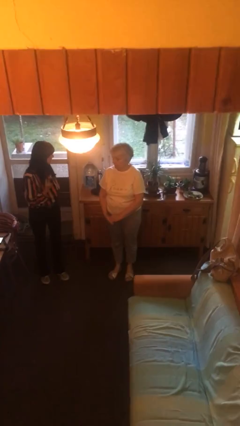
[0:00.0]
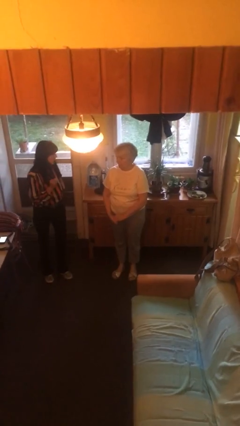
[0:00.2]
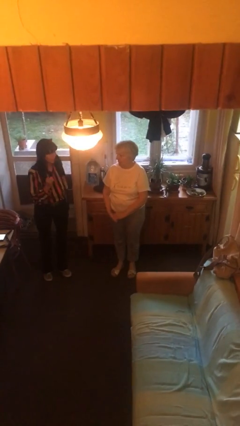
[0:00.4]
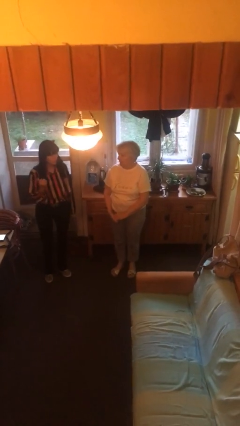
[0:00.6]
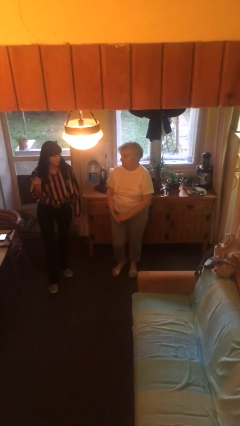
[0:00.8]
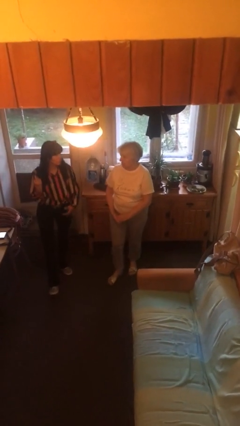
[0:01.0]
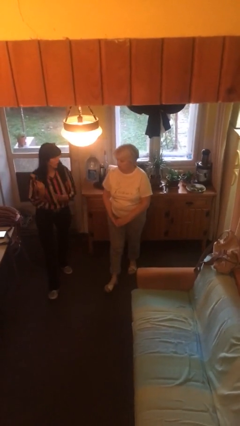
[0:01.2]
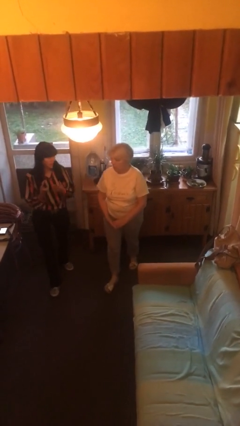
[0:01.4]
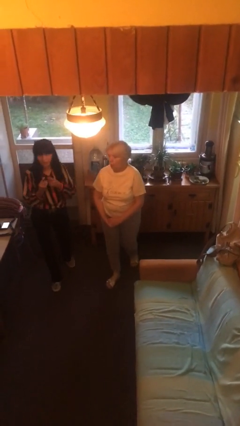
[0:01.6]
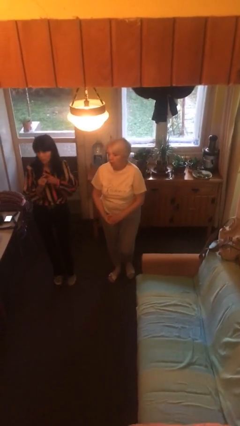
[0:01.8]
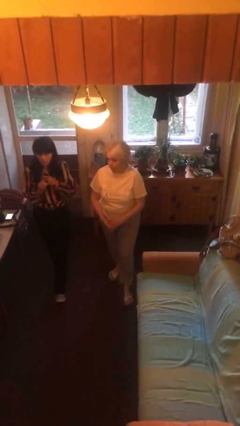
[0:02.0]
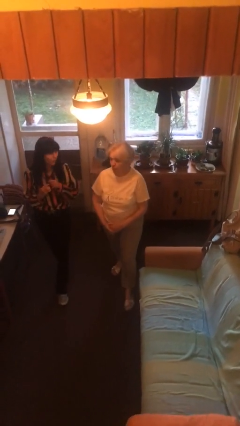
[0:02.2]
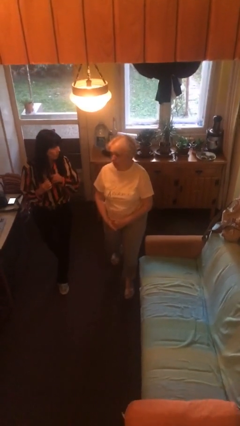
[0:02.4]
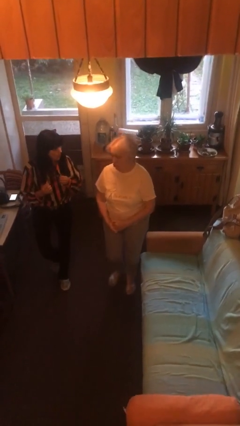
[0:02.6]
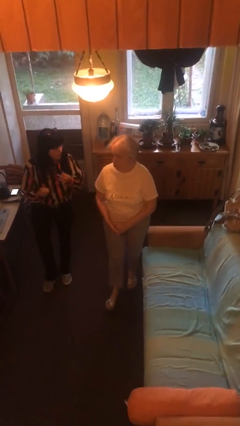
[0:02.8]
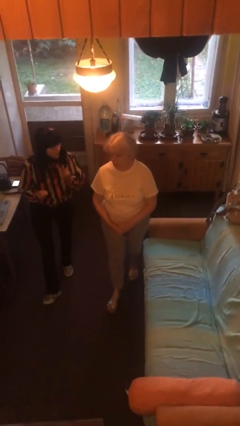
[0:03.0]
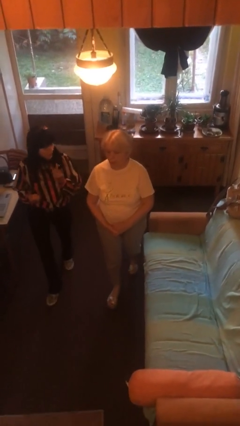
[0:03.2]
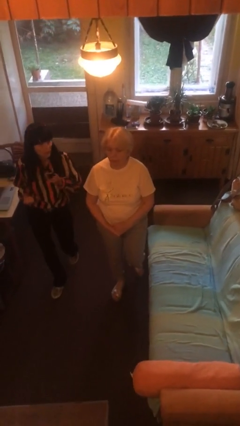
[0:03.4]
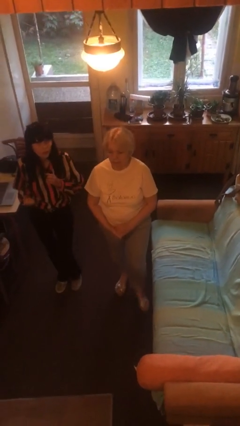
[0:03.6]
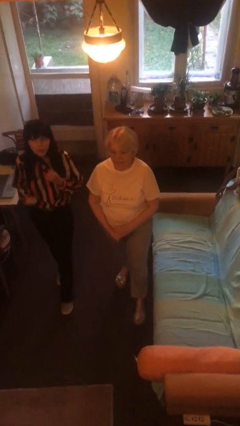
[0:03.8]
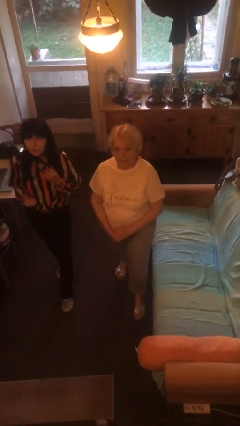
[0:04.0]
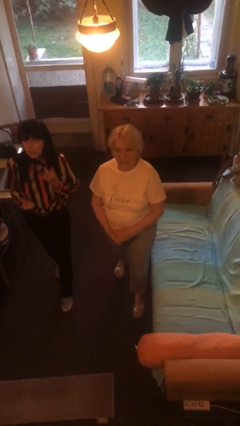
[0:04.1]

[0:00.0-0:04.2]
person talks to person

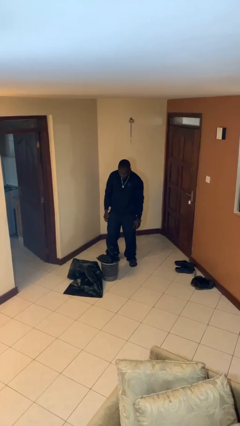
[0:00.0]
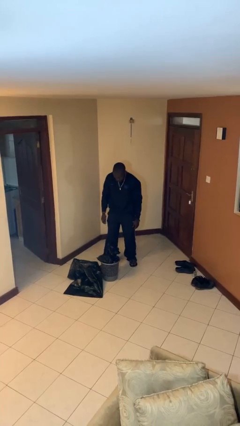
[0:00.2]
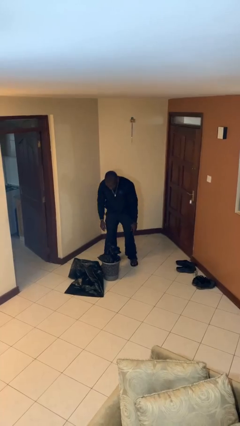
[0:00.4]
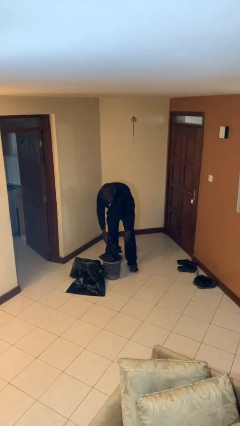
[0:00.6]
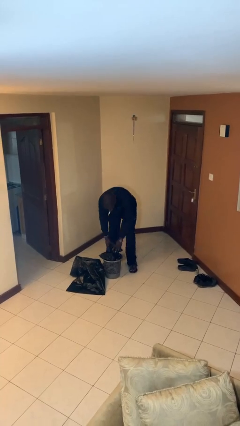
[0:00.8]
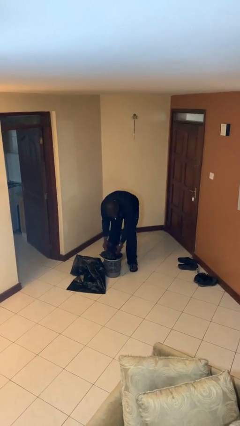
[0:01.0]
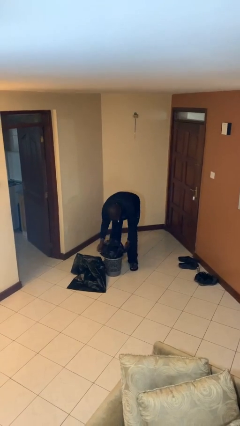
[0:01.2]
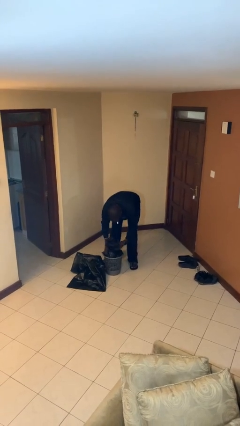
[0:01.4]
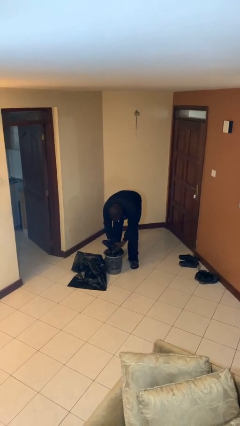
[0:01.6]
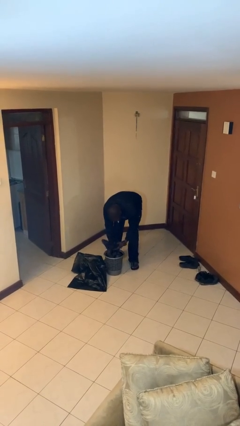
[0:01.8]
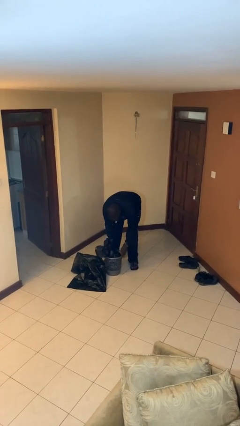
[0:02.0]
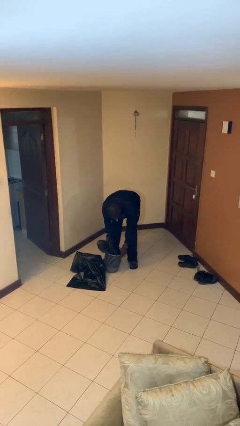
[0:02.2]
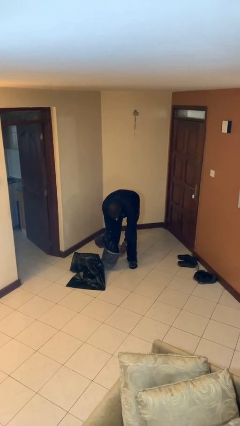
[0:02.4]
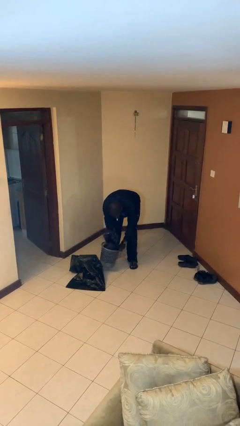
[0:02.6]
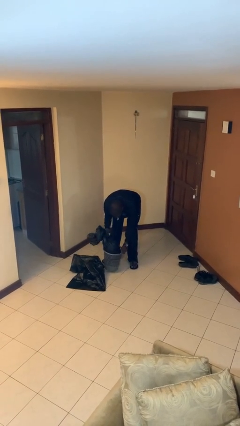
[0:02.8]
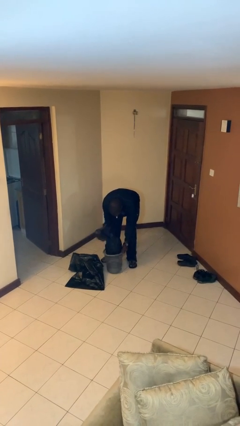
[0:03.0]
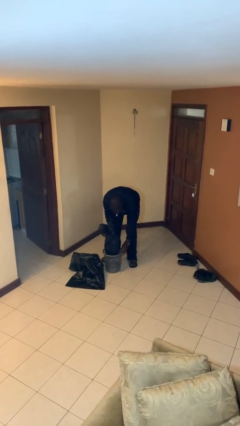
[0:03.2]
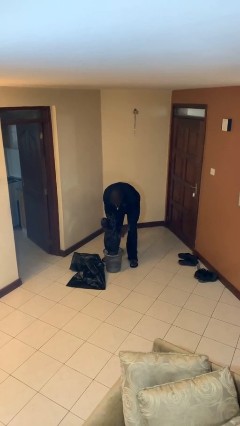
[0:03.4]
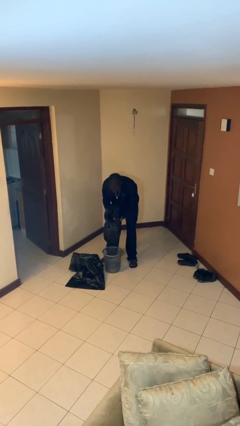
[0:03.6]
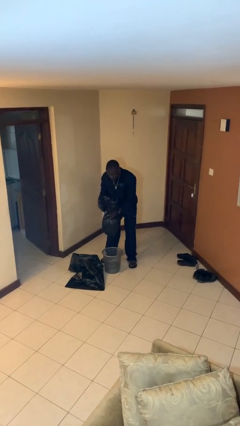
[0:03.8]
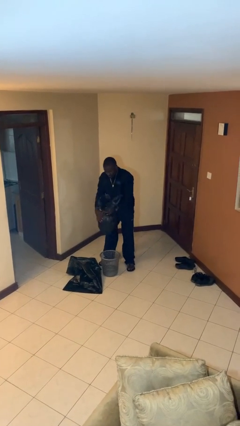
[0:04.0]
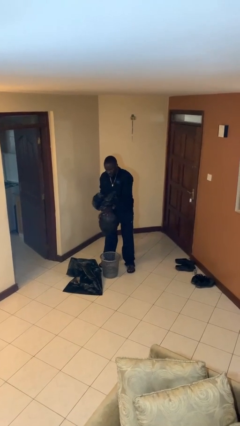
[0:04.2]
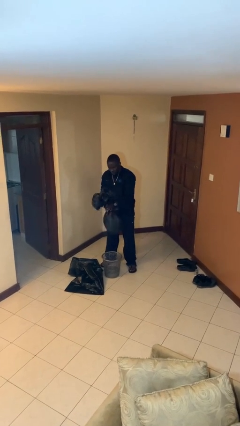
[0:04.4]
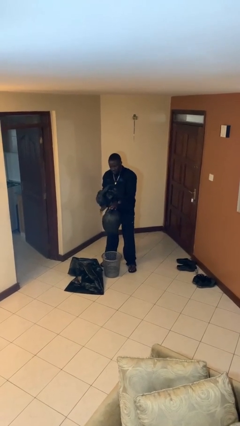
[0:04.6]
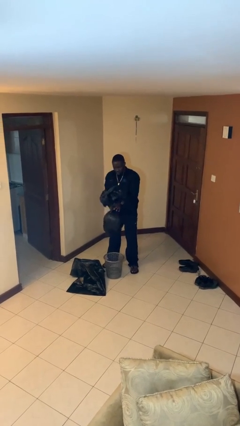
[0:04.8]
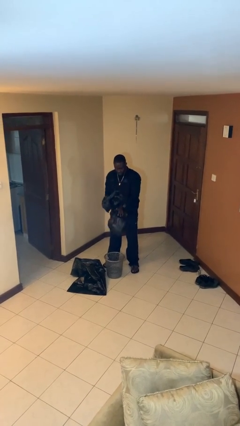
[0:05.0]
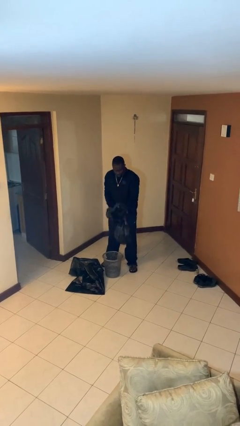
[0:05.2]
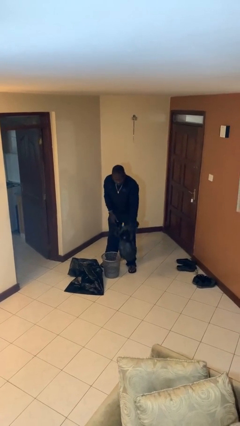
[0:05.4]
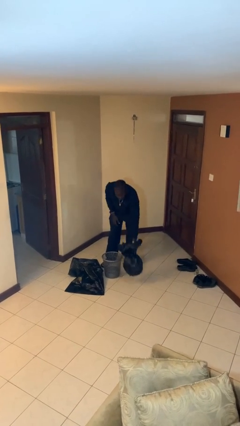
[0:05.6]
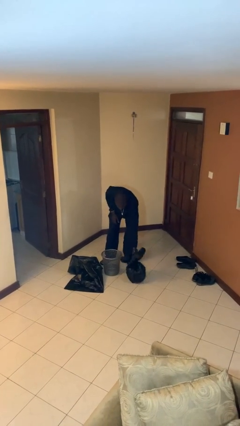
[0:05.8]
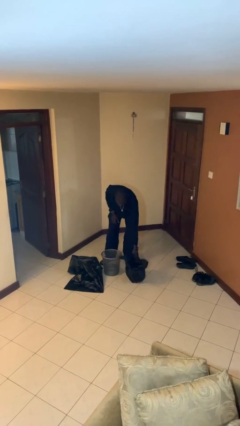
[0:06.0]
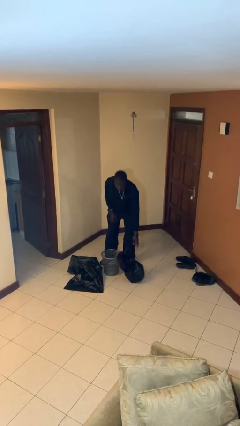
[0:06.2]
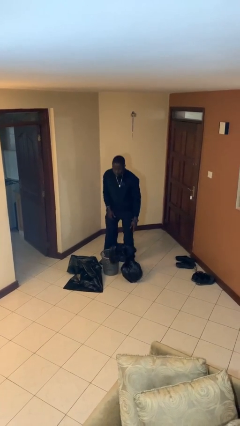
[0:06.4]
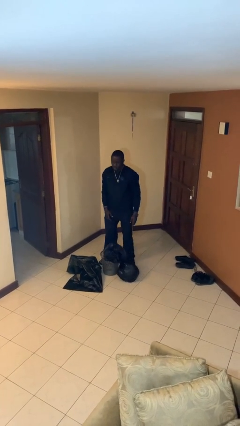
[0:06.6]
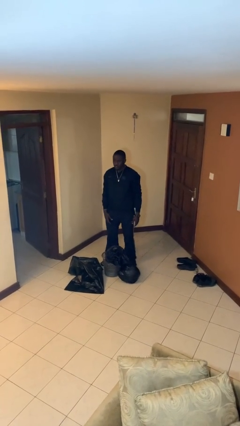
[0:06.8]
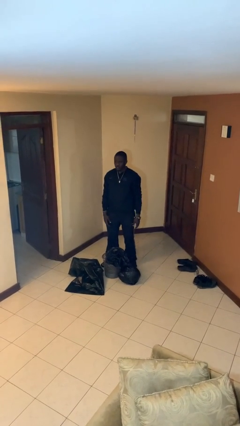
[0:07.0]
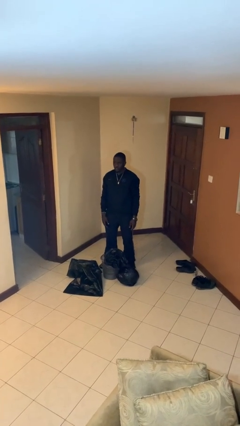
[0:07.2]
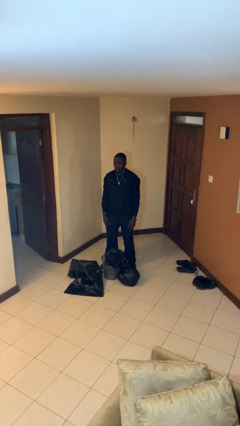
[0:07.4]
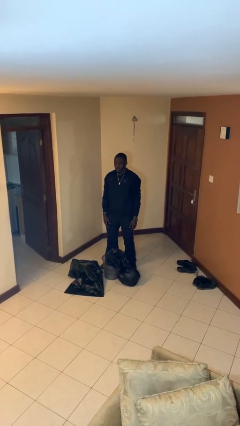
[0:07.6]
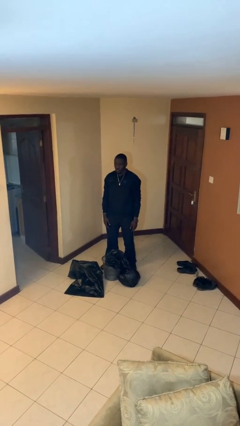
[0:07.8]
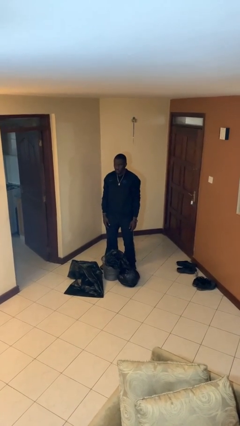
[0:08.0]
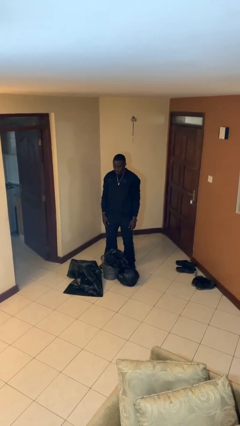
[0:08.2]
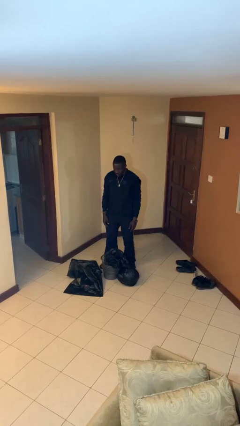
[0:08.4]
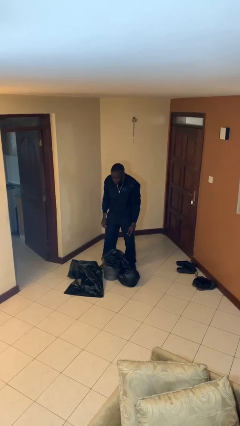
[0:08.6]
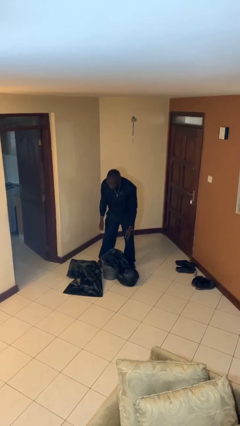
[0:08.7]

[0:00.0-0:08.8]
person removes trashbag from trashcan

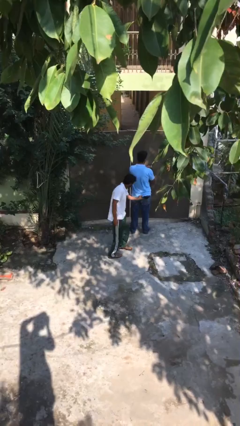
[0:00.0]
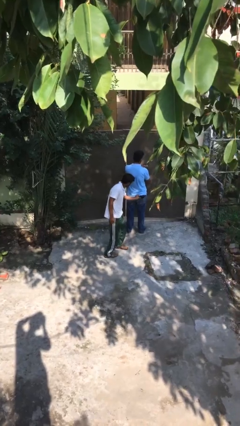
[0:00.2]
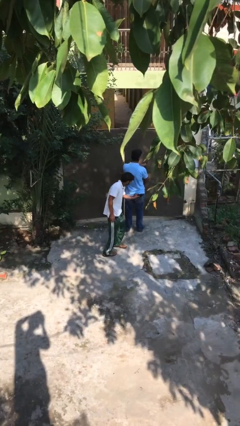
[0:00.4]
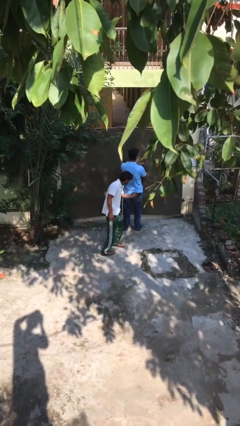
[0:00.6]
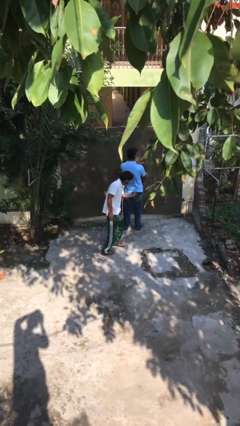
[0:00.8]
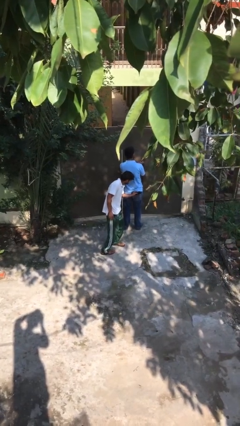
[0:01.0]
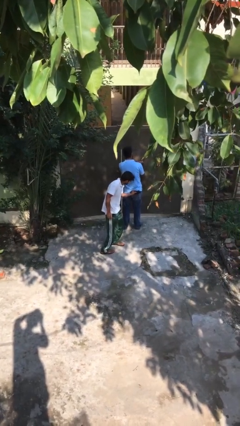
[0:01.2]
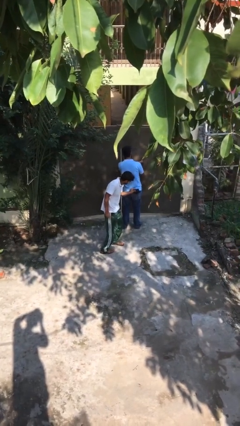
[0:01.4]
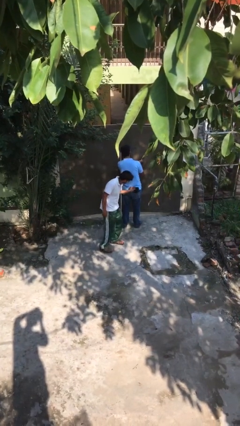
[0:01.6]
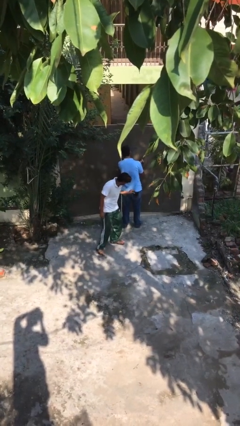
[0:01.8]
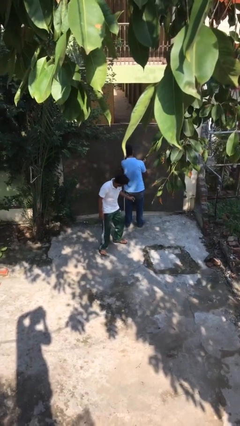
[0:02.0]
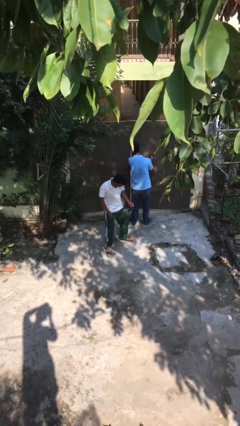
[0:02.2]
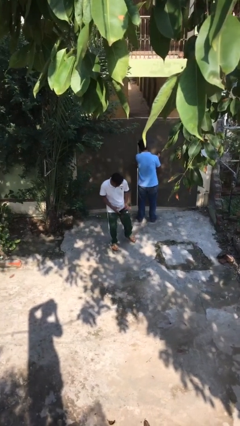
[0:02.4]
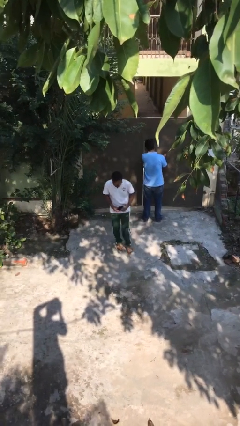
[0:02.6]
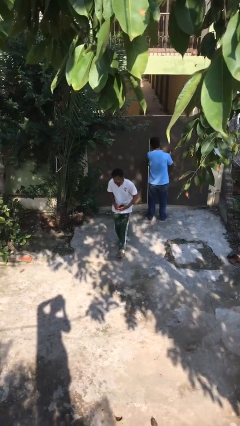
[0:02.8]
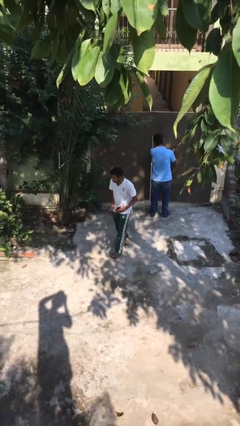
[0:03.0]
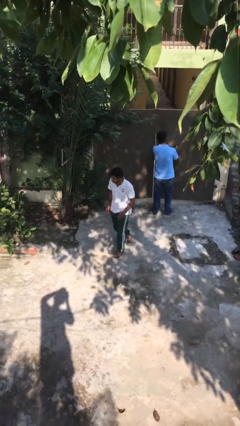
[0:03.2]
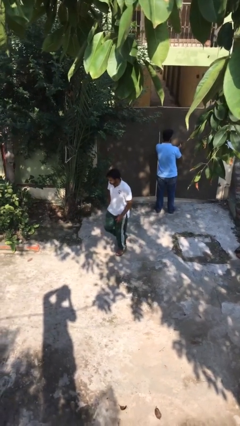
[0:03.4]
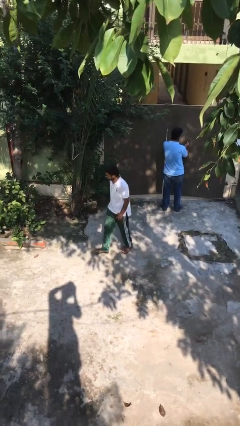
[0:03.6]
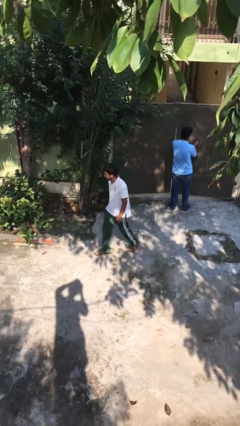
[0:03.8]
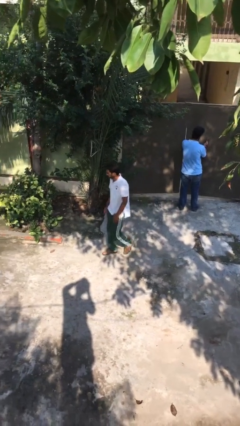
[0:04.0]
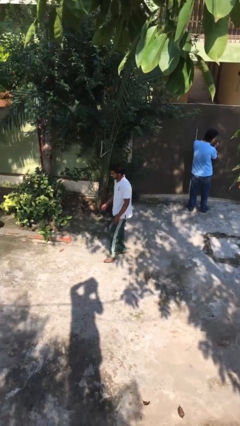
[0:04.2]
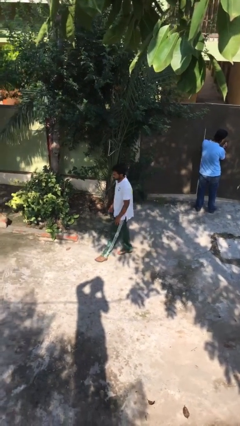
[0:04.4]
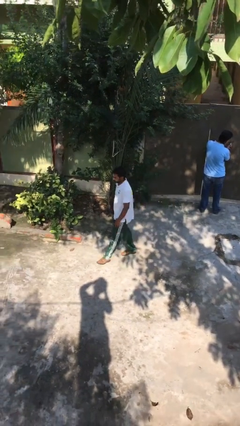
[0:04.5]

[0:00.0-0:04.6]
person steals object from person

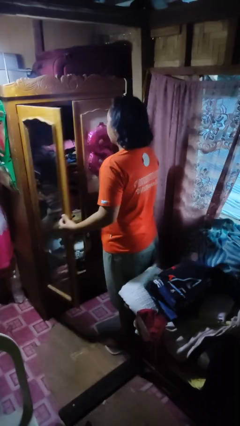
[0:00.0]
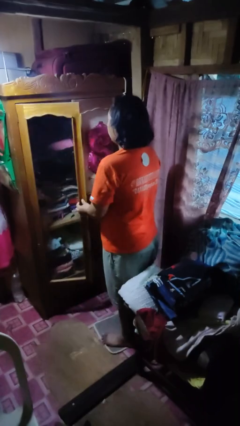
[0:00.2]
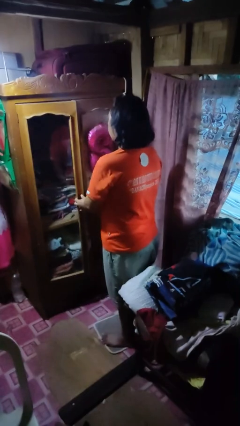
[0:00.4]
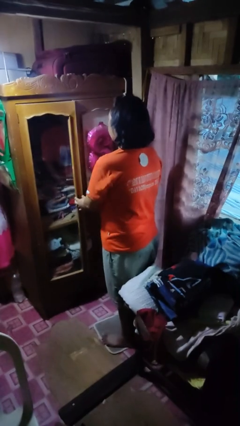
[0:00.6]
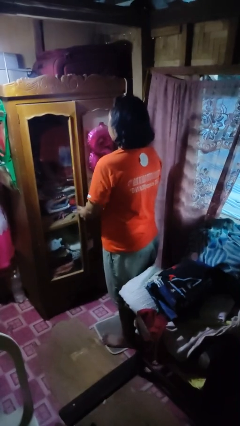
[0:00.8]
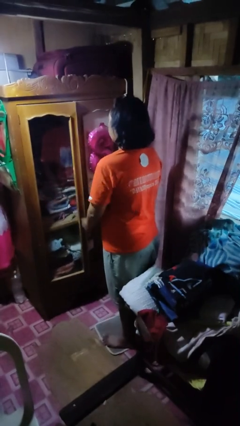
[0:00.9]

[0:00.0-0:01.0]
person closes closet door
